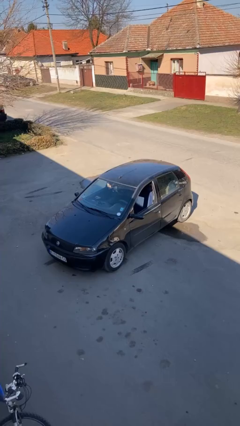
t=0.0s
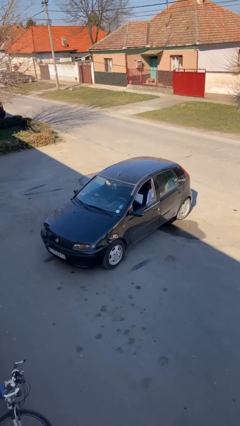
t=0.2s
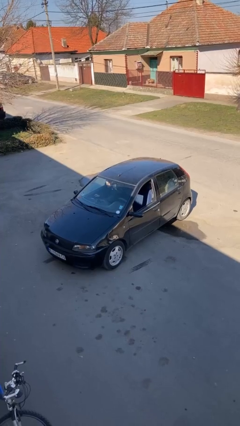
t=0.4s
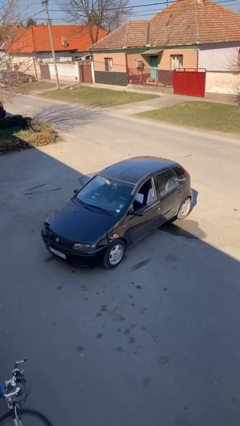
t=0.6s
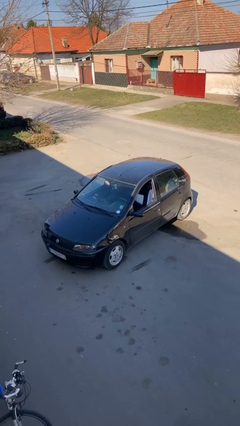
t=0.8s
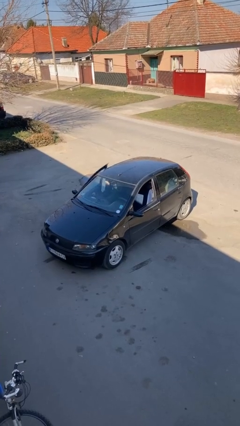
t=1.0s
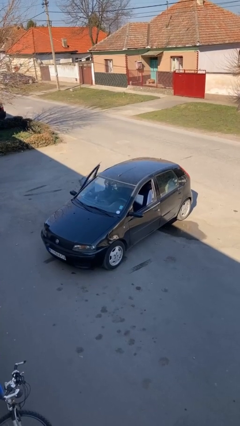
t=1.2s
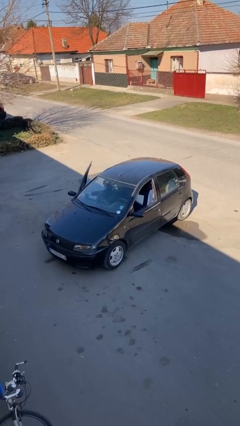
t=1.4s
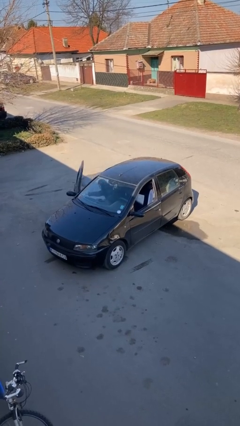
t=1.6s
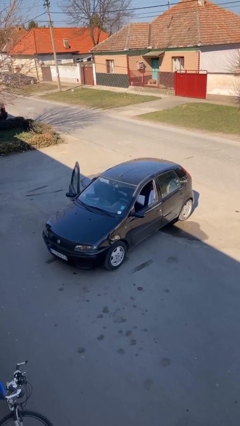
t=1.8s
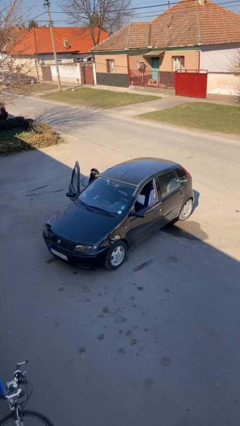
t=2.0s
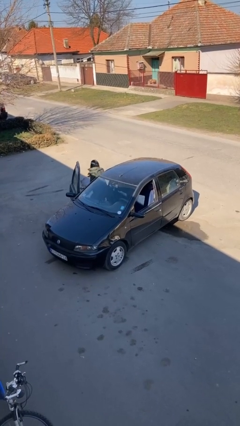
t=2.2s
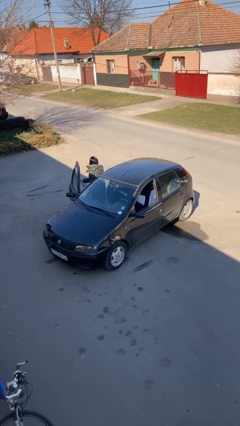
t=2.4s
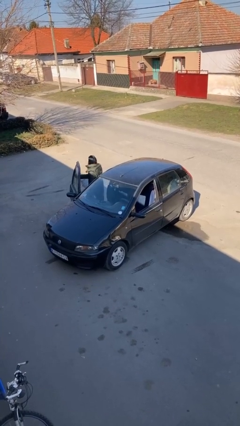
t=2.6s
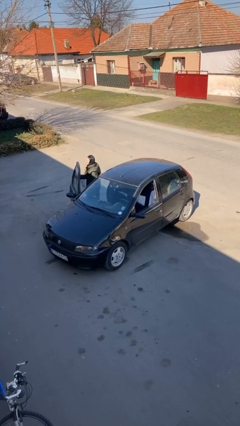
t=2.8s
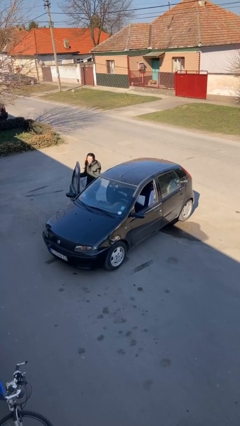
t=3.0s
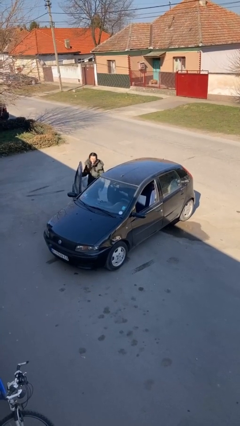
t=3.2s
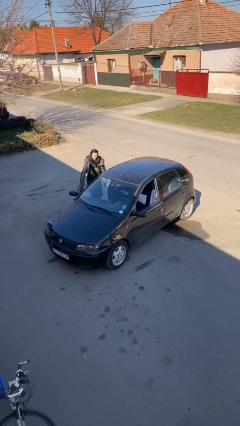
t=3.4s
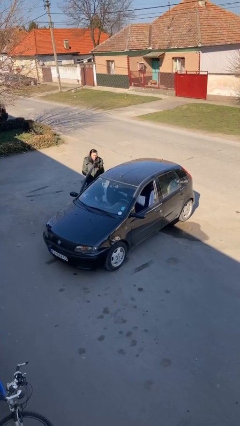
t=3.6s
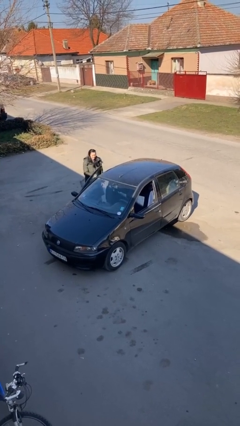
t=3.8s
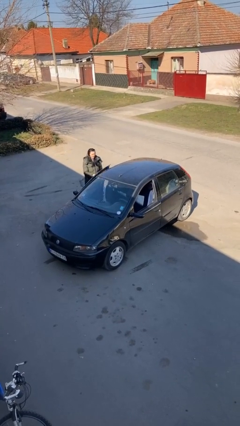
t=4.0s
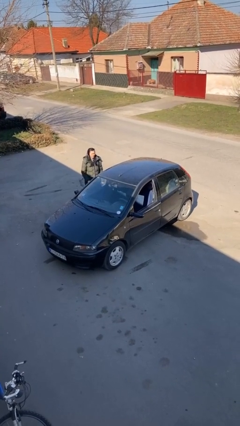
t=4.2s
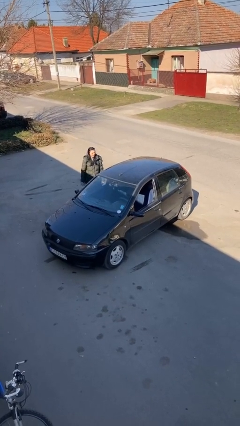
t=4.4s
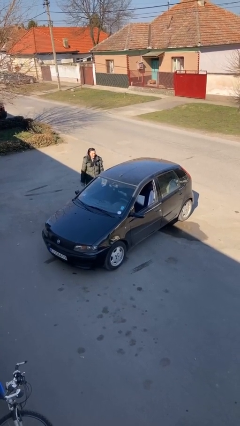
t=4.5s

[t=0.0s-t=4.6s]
car drops off person

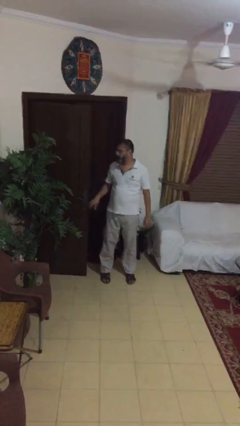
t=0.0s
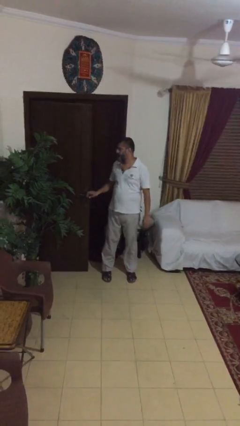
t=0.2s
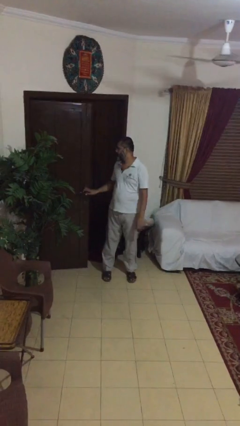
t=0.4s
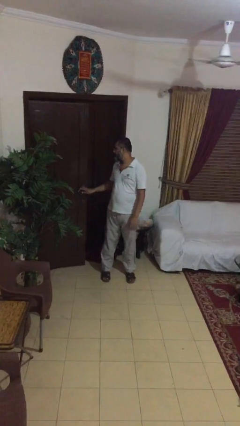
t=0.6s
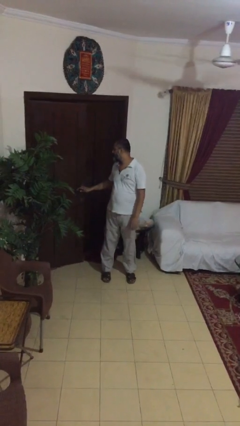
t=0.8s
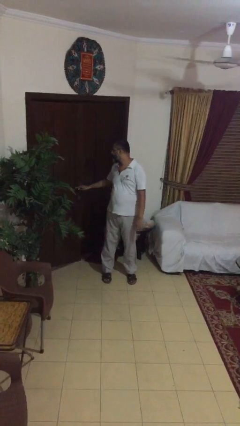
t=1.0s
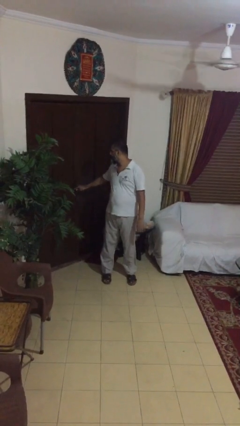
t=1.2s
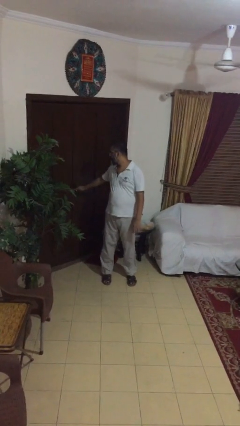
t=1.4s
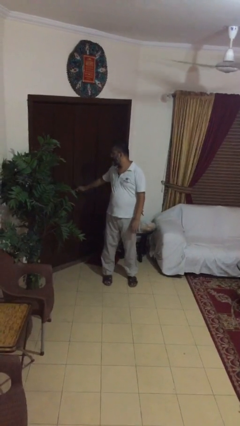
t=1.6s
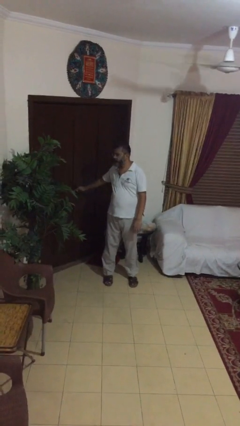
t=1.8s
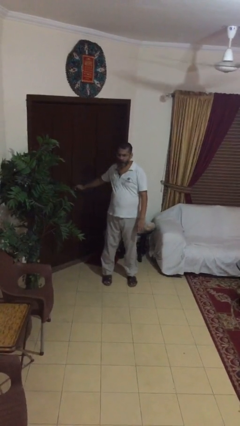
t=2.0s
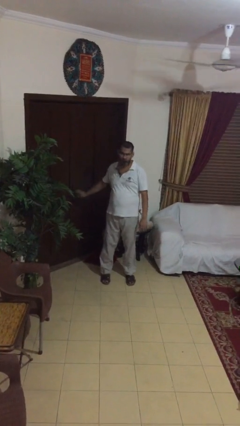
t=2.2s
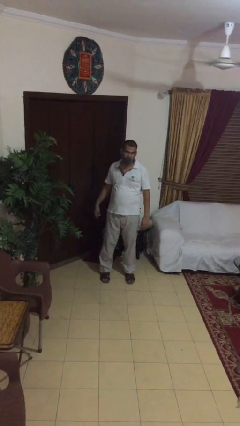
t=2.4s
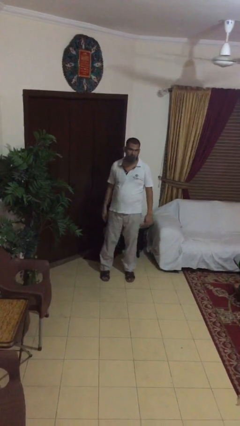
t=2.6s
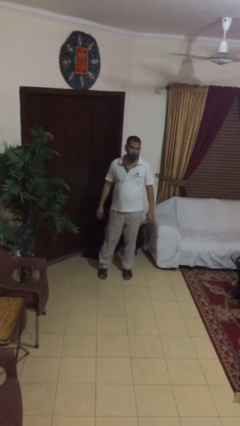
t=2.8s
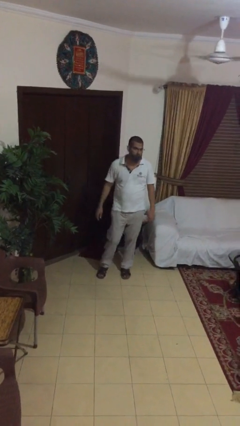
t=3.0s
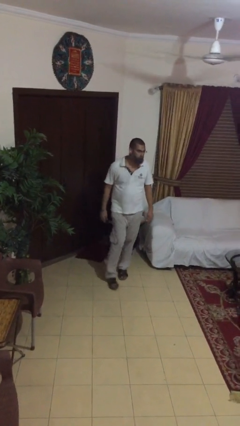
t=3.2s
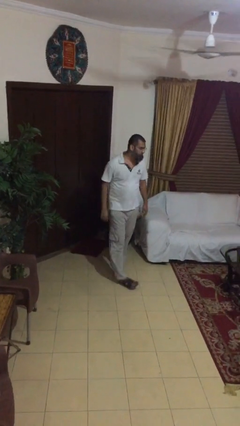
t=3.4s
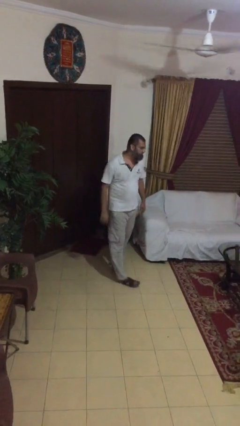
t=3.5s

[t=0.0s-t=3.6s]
person closes facility door

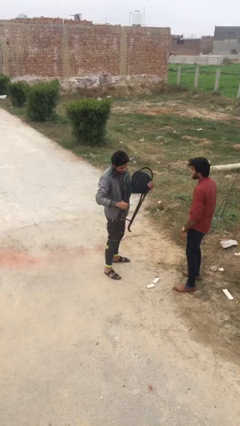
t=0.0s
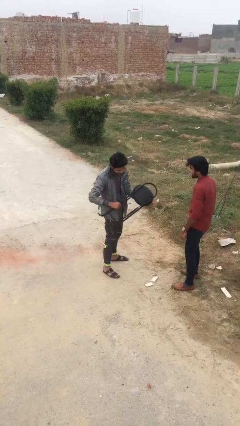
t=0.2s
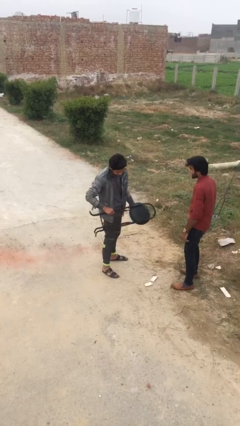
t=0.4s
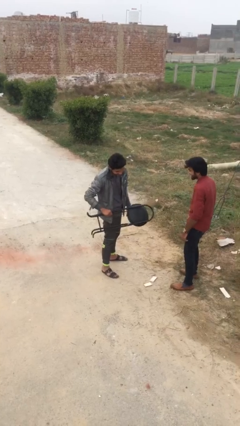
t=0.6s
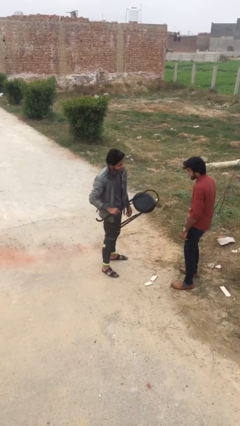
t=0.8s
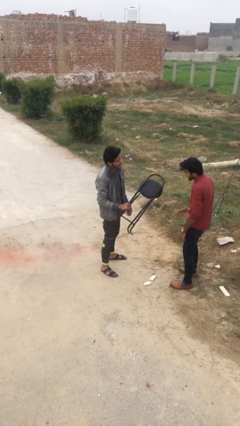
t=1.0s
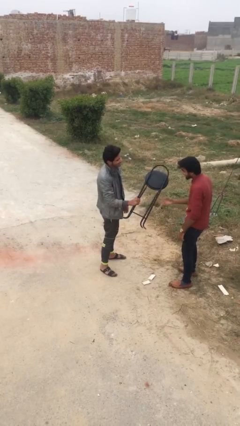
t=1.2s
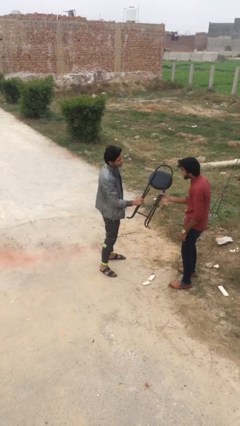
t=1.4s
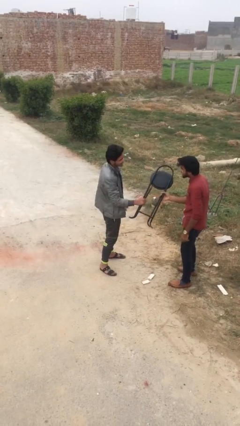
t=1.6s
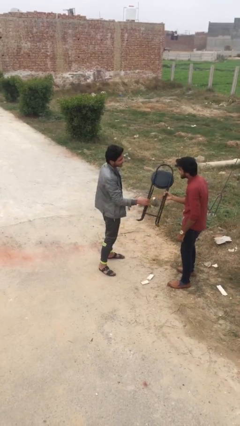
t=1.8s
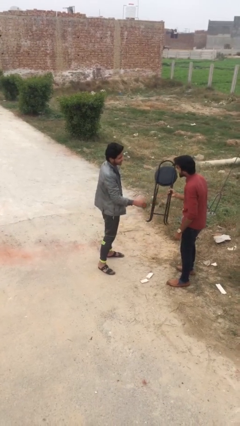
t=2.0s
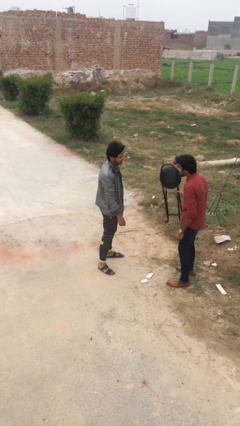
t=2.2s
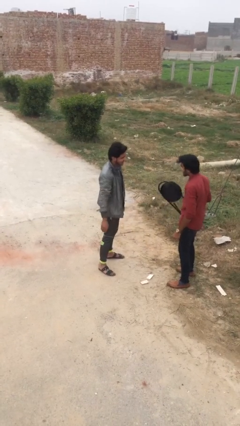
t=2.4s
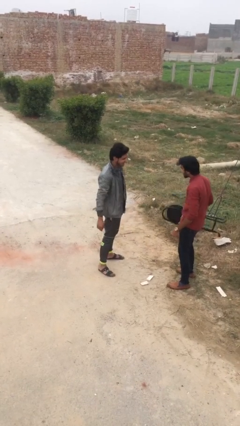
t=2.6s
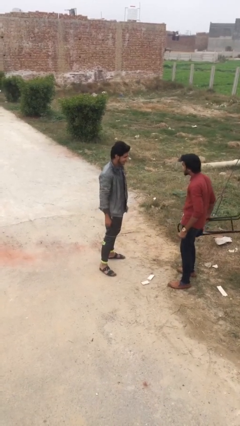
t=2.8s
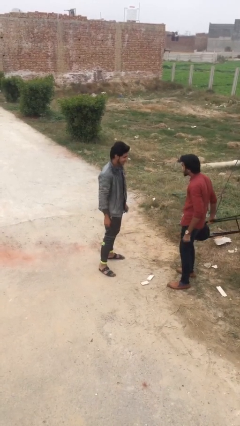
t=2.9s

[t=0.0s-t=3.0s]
person transfers object to person

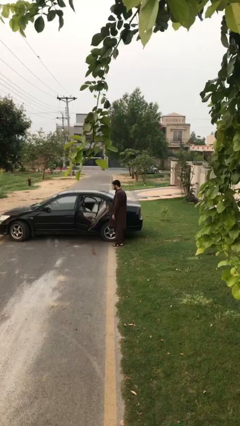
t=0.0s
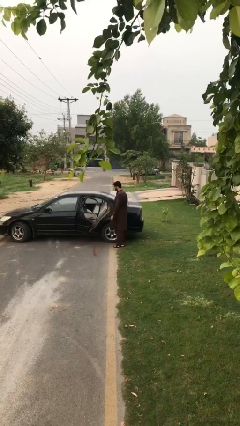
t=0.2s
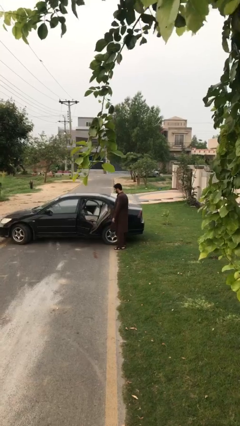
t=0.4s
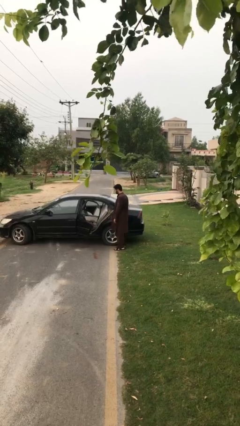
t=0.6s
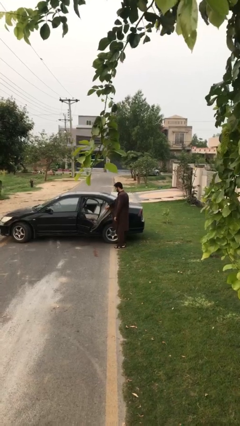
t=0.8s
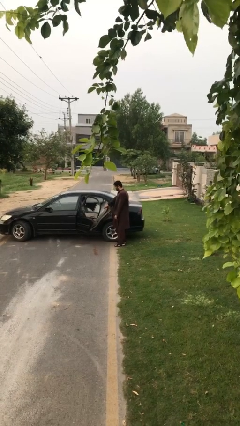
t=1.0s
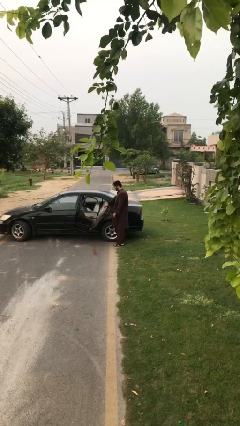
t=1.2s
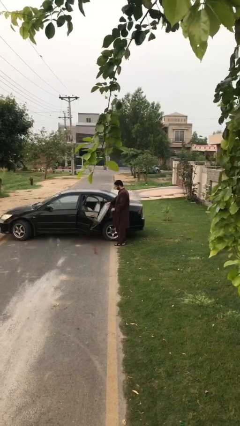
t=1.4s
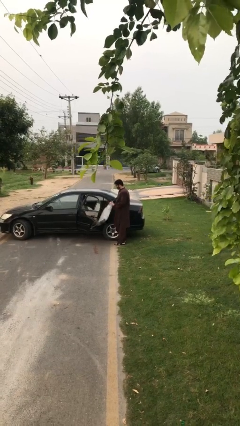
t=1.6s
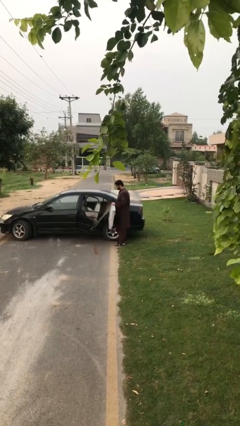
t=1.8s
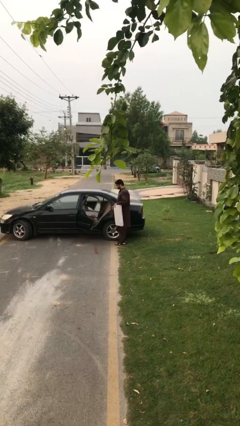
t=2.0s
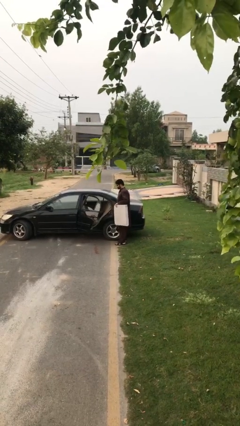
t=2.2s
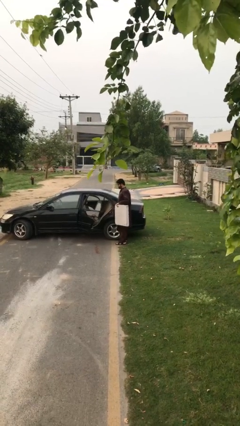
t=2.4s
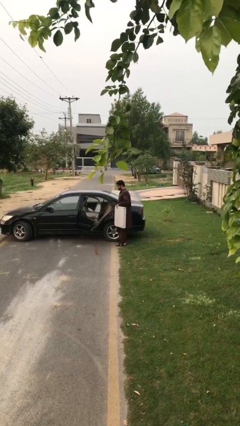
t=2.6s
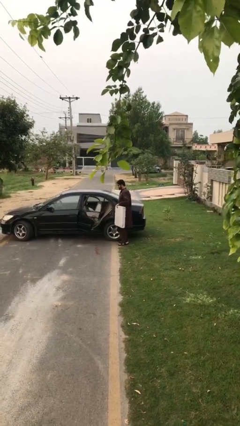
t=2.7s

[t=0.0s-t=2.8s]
person unloads car

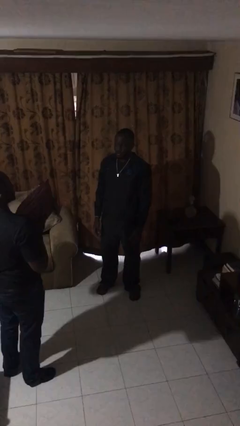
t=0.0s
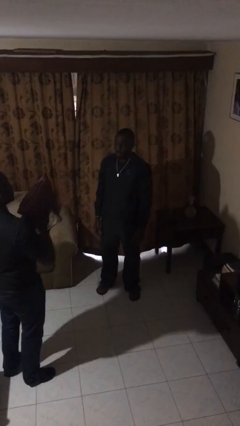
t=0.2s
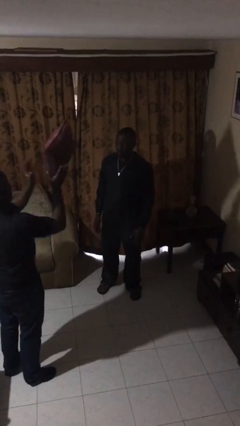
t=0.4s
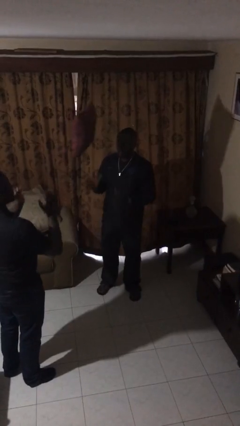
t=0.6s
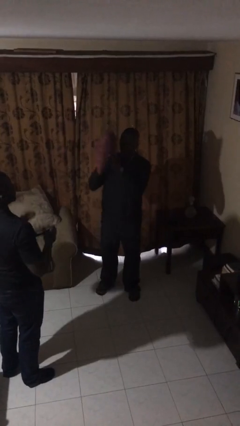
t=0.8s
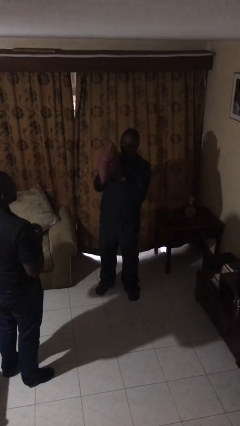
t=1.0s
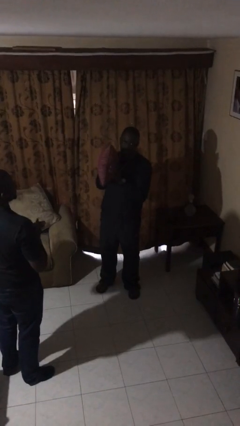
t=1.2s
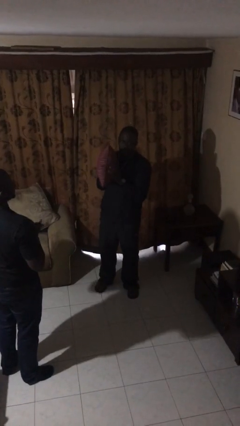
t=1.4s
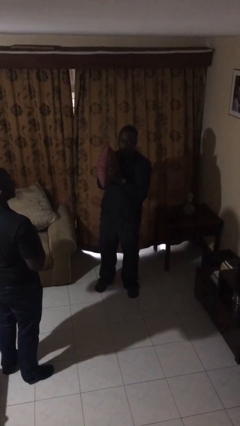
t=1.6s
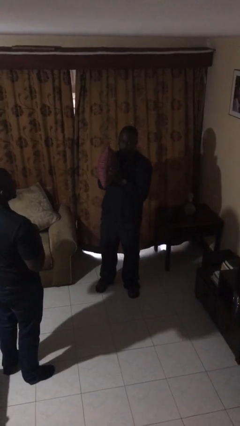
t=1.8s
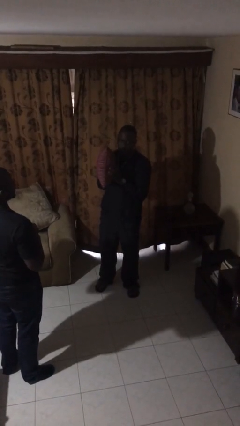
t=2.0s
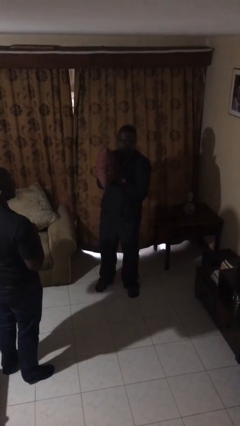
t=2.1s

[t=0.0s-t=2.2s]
person catches object from person

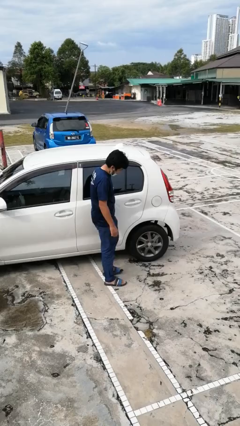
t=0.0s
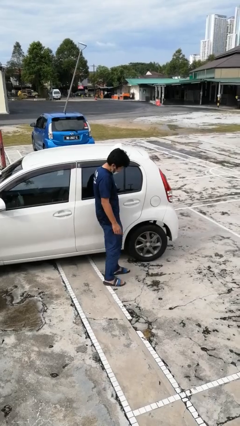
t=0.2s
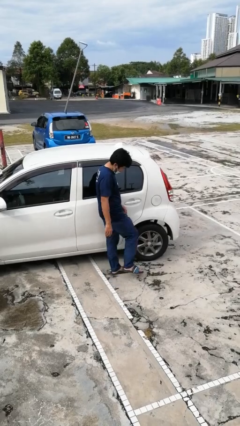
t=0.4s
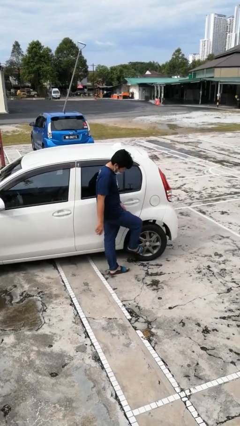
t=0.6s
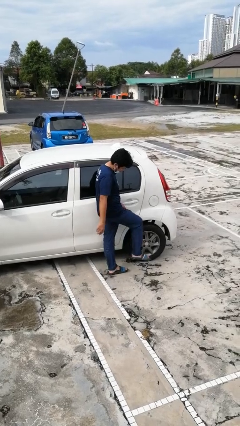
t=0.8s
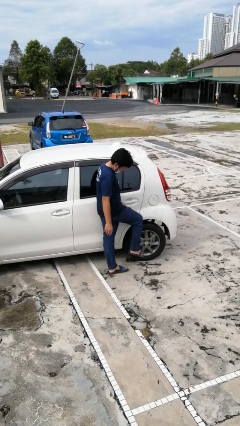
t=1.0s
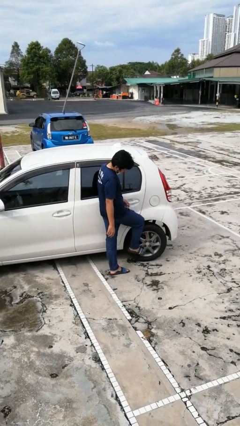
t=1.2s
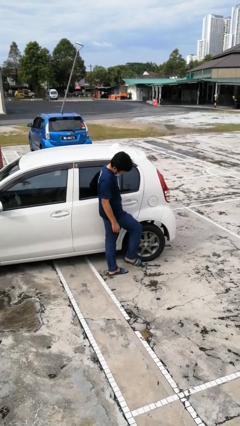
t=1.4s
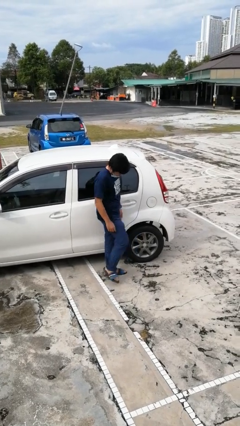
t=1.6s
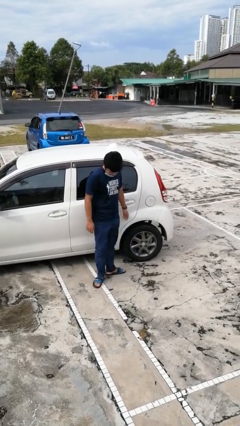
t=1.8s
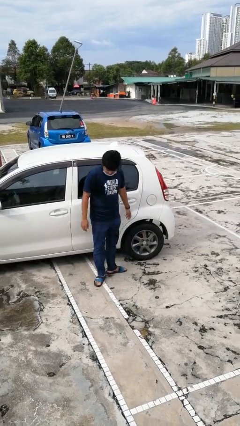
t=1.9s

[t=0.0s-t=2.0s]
person kicks car tires
